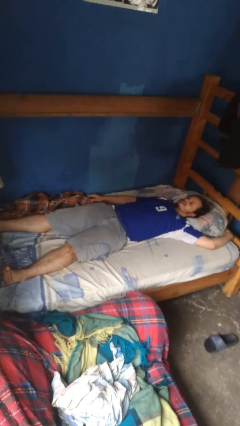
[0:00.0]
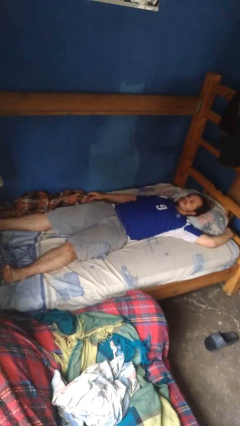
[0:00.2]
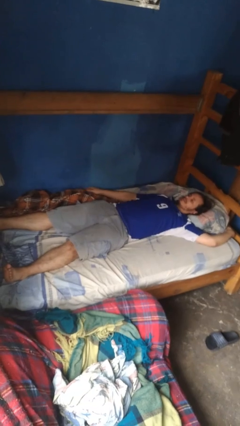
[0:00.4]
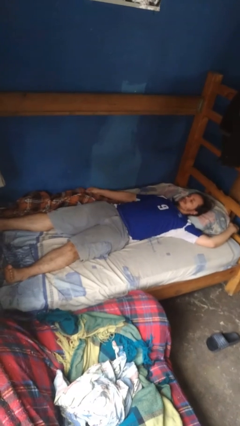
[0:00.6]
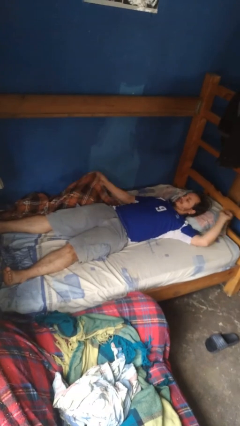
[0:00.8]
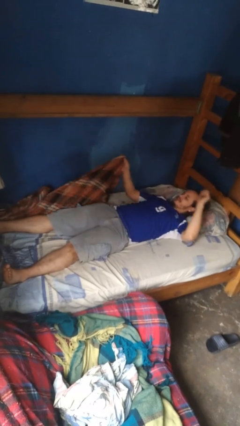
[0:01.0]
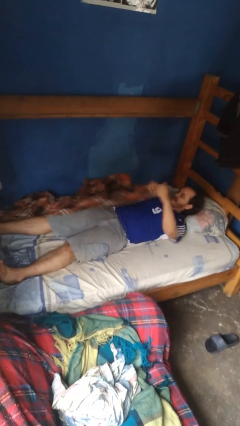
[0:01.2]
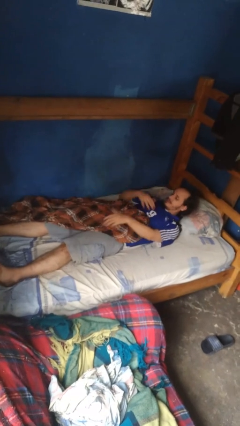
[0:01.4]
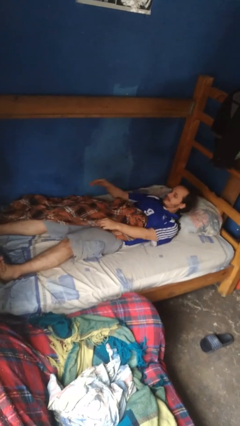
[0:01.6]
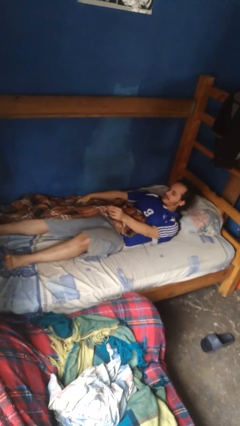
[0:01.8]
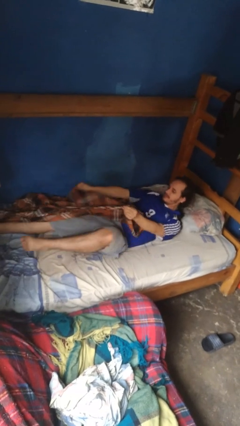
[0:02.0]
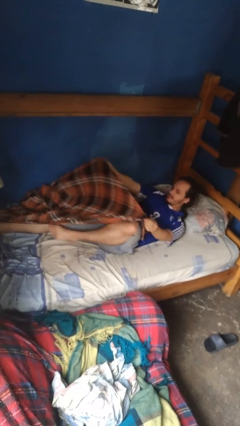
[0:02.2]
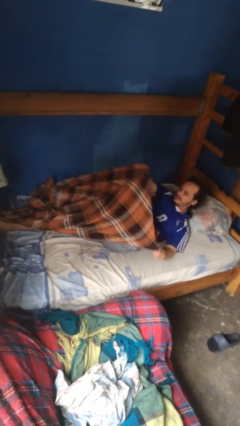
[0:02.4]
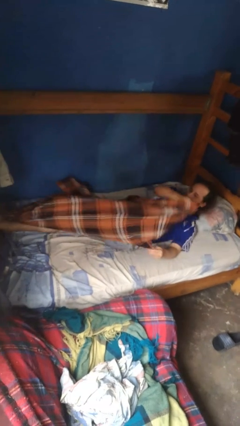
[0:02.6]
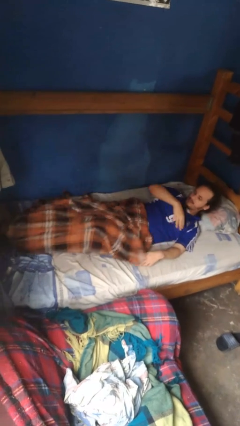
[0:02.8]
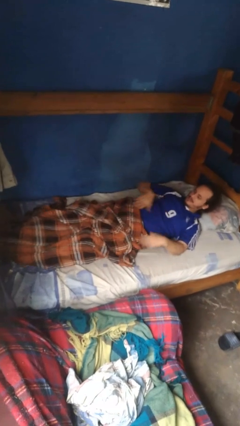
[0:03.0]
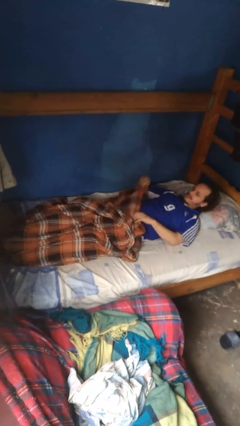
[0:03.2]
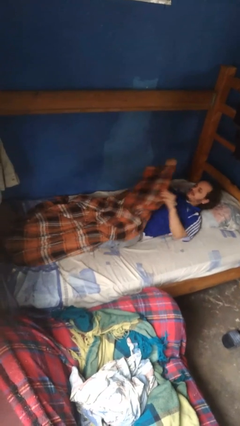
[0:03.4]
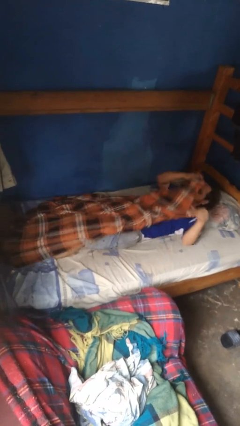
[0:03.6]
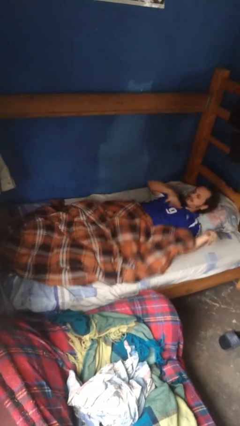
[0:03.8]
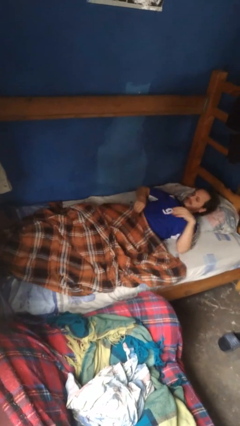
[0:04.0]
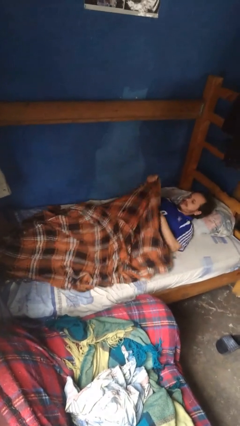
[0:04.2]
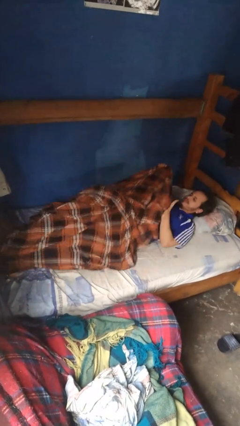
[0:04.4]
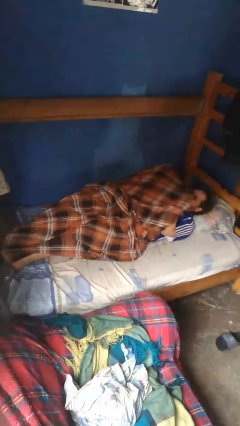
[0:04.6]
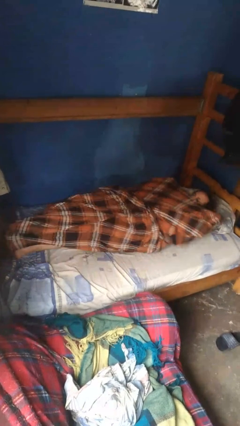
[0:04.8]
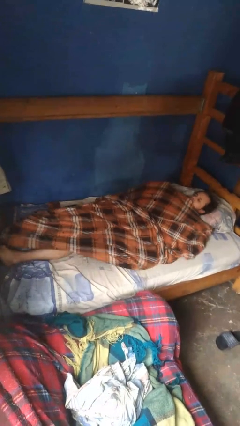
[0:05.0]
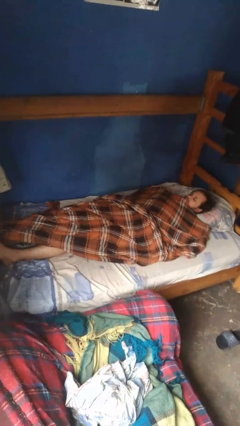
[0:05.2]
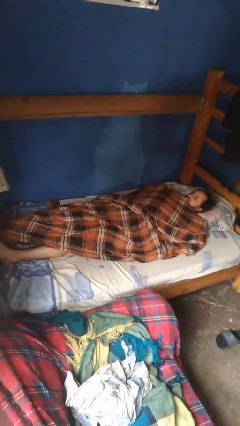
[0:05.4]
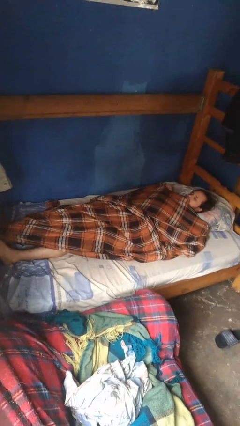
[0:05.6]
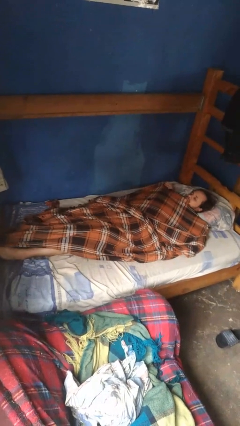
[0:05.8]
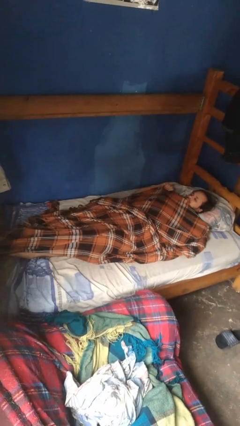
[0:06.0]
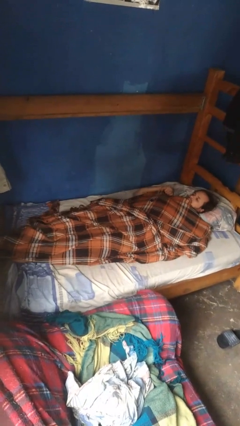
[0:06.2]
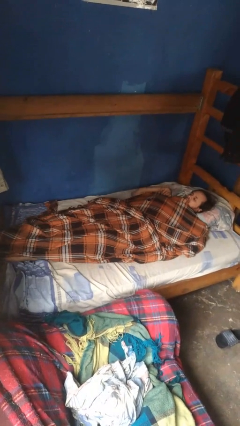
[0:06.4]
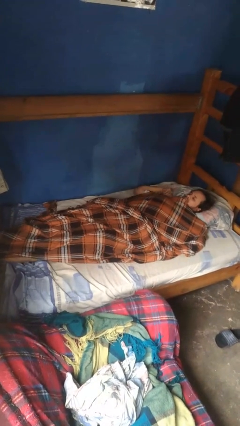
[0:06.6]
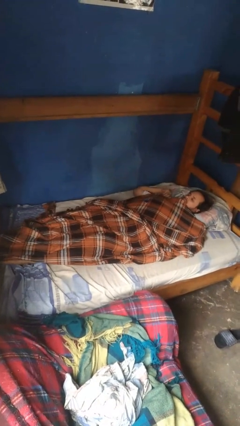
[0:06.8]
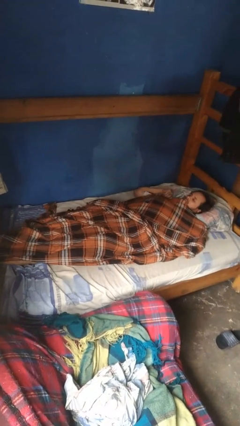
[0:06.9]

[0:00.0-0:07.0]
person covers with bedsheets

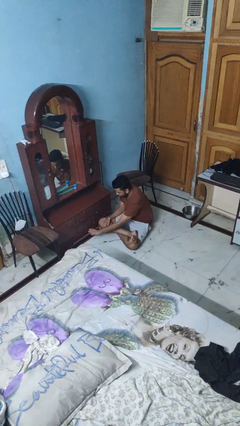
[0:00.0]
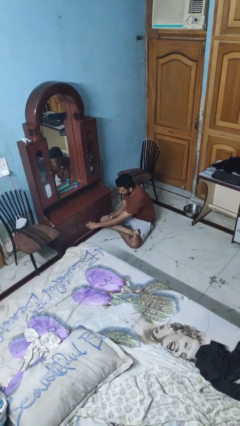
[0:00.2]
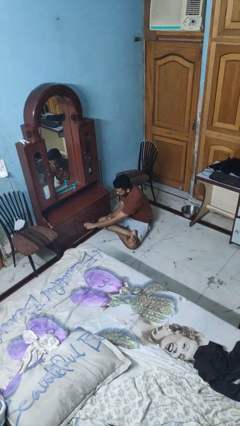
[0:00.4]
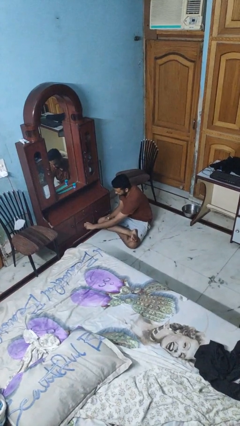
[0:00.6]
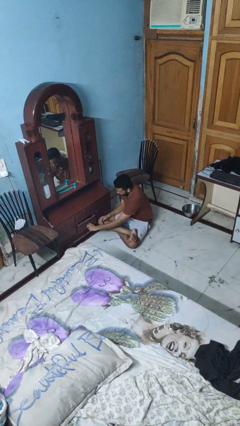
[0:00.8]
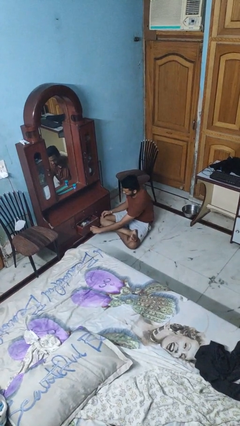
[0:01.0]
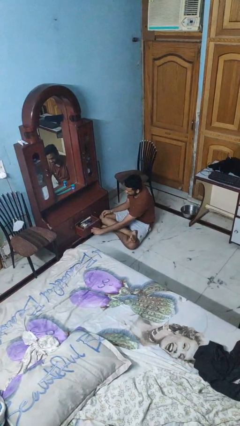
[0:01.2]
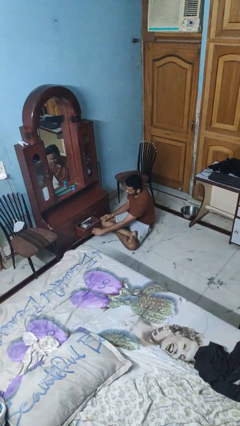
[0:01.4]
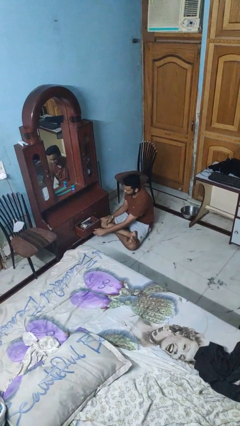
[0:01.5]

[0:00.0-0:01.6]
person opens dresser drawer

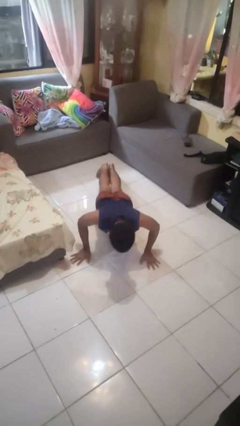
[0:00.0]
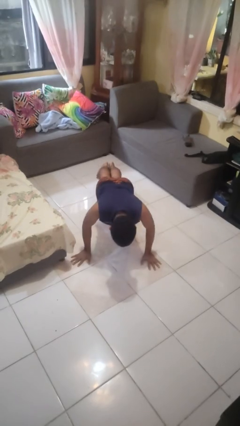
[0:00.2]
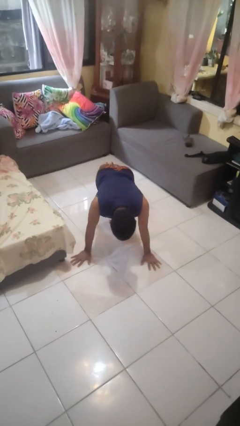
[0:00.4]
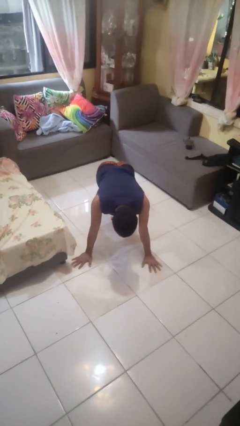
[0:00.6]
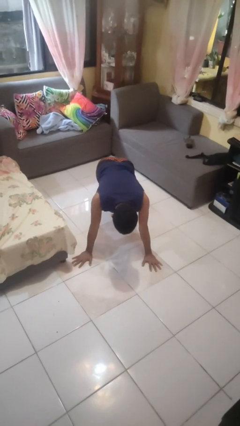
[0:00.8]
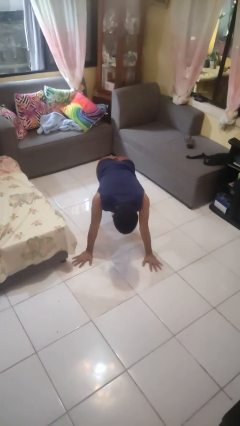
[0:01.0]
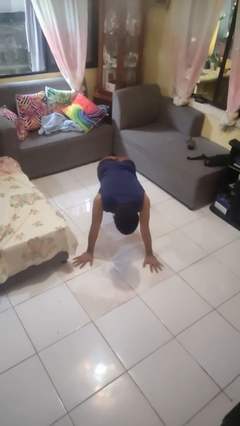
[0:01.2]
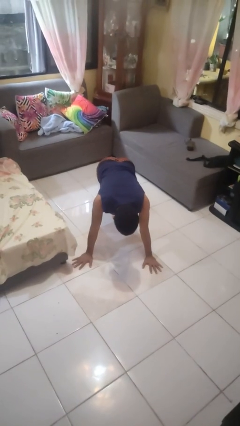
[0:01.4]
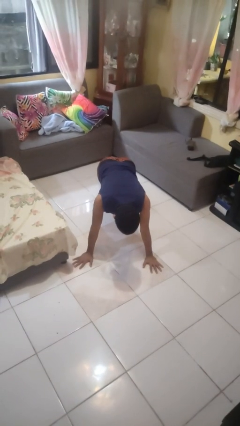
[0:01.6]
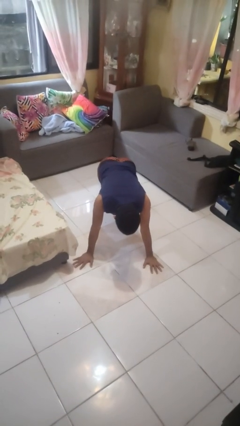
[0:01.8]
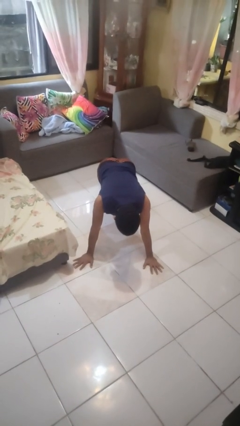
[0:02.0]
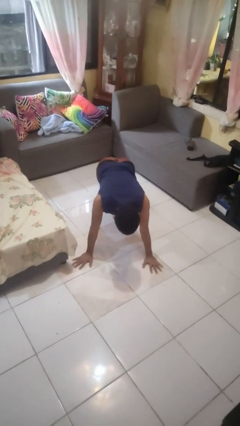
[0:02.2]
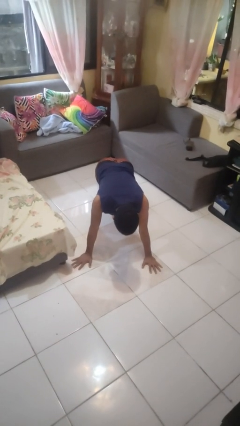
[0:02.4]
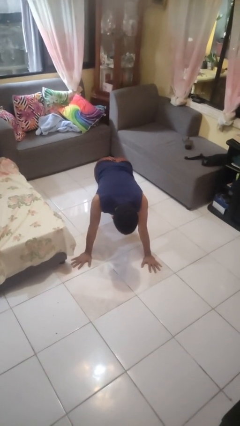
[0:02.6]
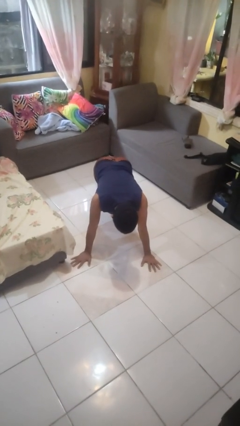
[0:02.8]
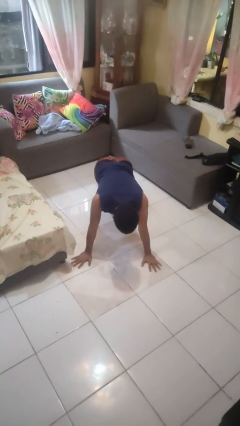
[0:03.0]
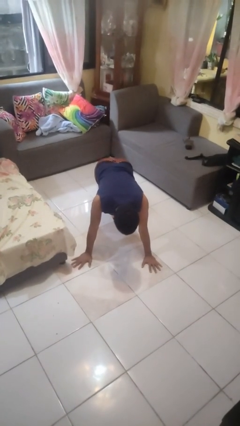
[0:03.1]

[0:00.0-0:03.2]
person exercises with pushup

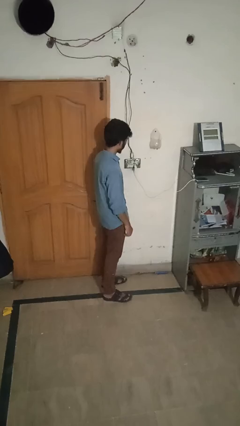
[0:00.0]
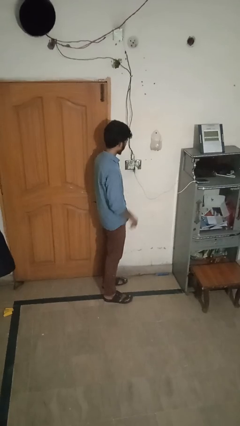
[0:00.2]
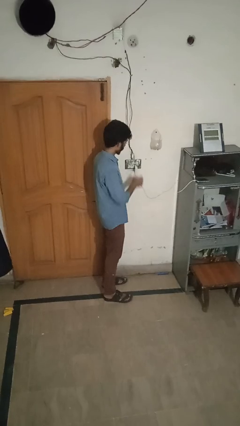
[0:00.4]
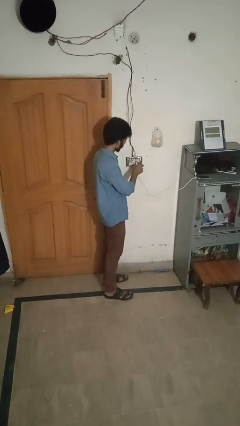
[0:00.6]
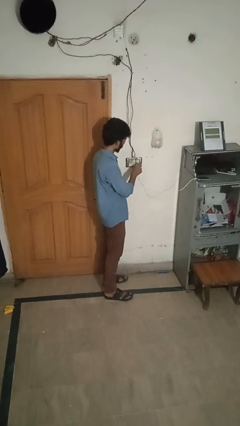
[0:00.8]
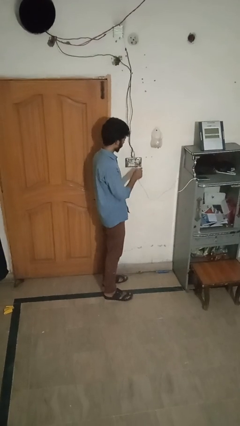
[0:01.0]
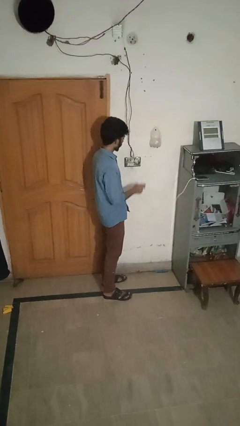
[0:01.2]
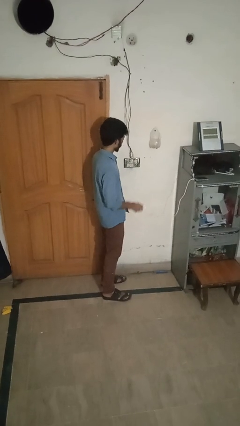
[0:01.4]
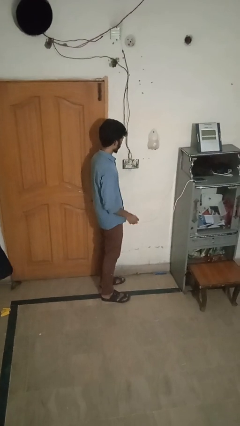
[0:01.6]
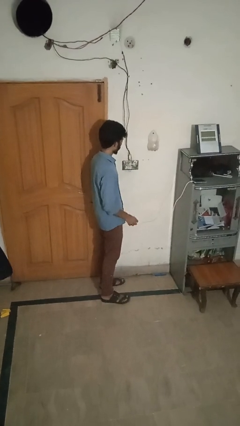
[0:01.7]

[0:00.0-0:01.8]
person unplugs from electrical socket

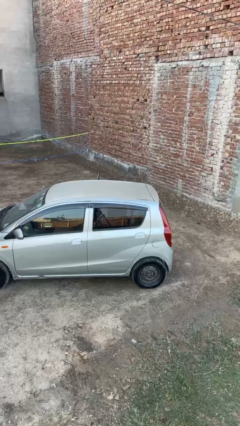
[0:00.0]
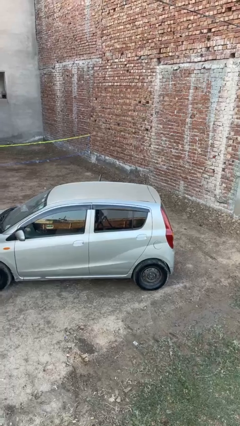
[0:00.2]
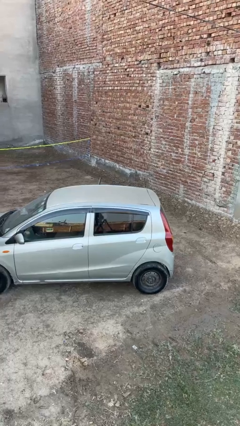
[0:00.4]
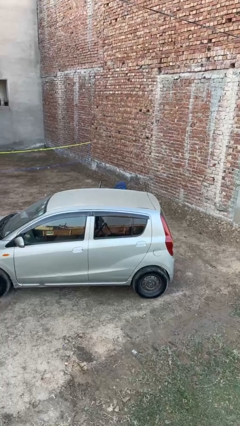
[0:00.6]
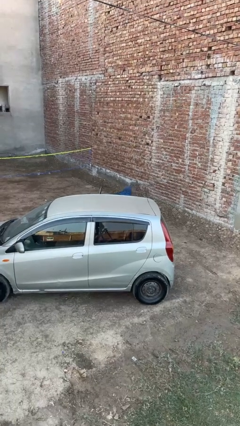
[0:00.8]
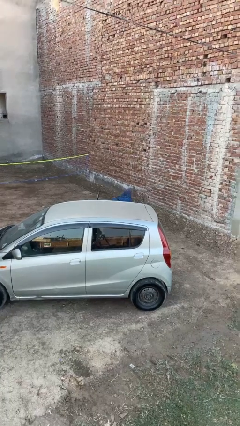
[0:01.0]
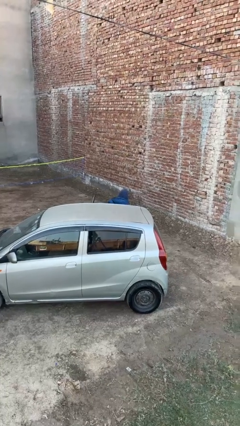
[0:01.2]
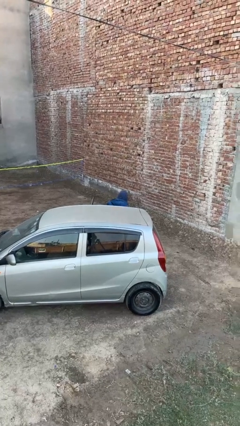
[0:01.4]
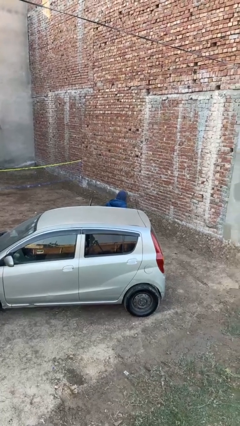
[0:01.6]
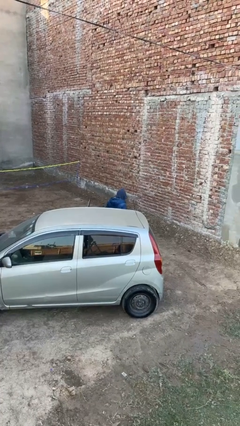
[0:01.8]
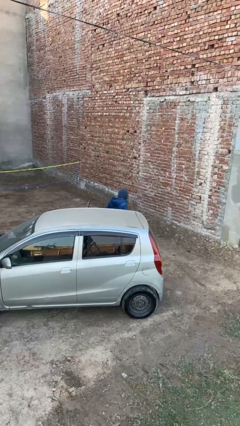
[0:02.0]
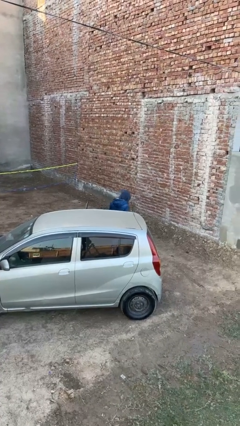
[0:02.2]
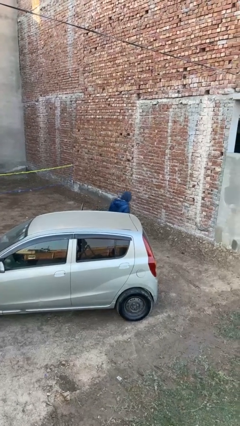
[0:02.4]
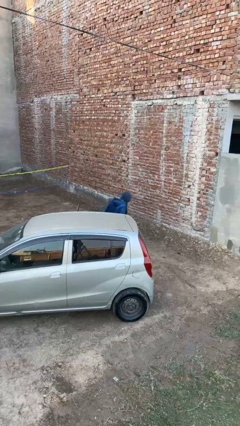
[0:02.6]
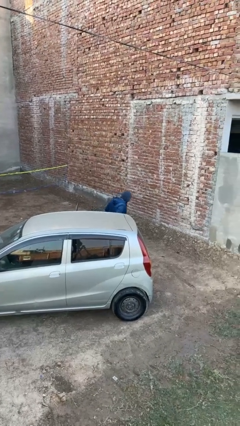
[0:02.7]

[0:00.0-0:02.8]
person exits car

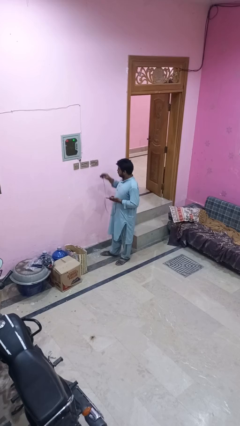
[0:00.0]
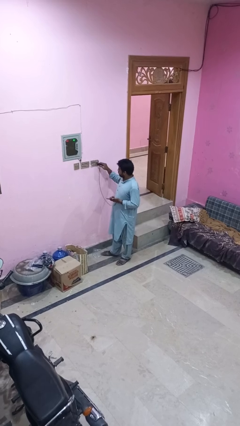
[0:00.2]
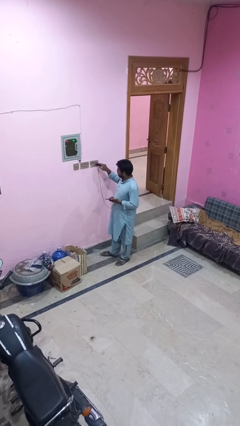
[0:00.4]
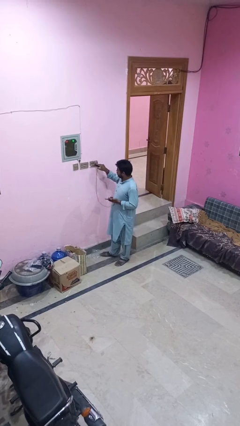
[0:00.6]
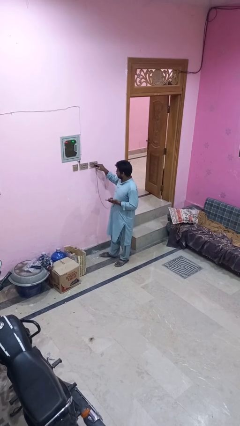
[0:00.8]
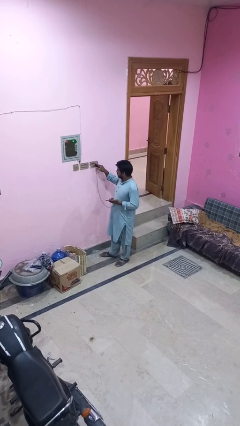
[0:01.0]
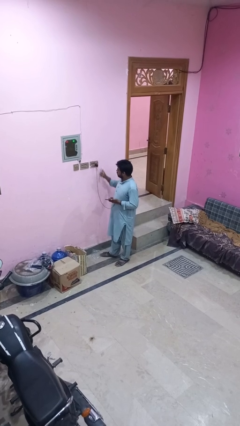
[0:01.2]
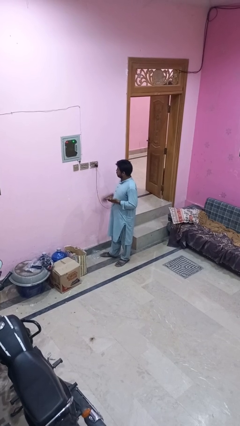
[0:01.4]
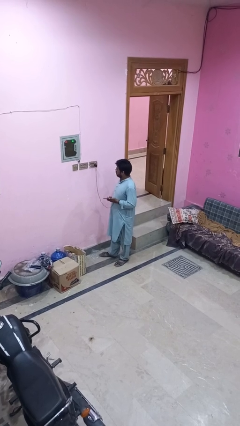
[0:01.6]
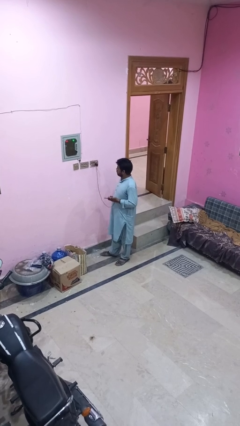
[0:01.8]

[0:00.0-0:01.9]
person plugs into electrical socket
